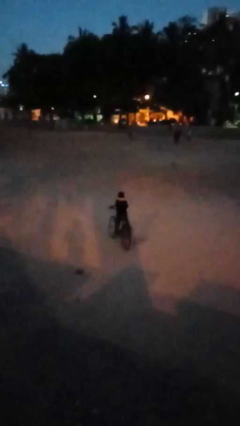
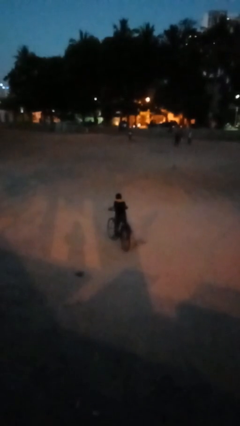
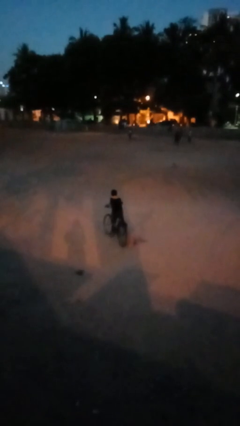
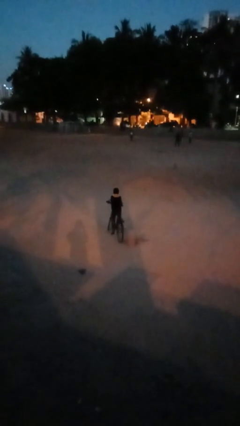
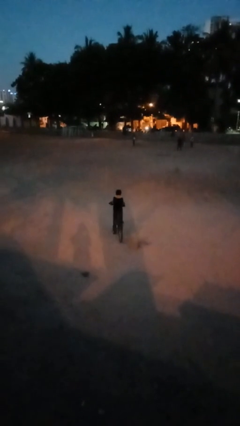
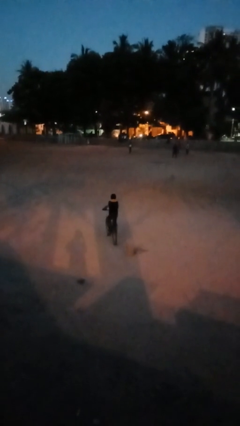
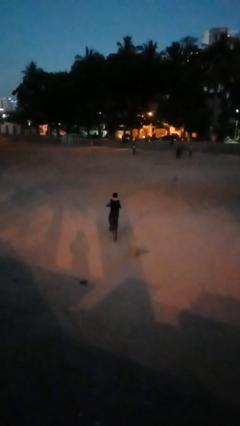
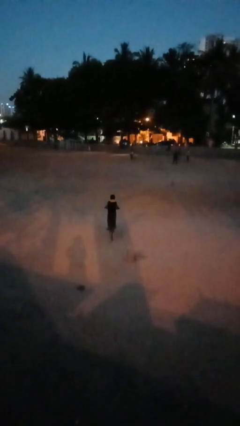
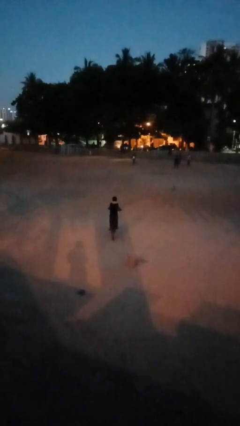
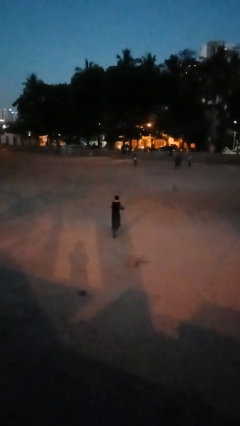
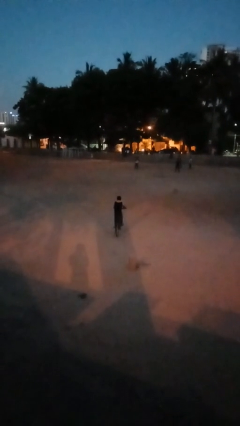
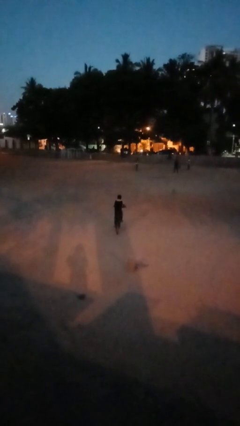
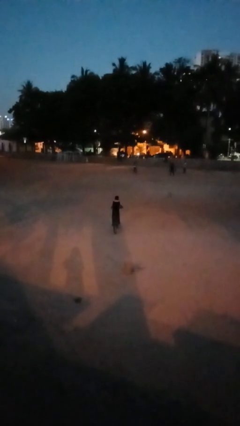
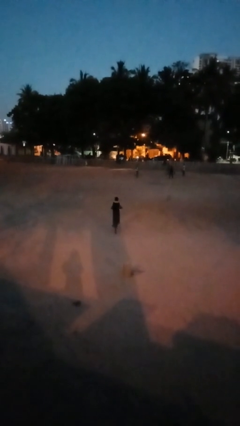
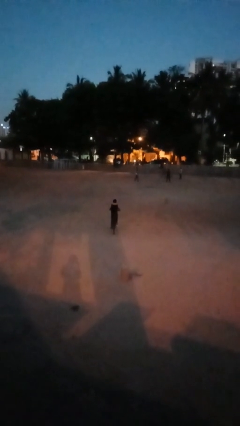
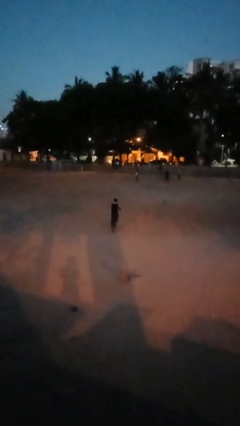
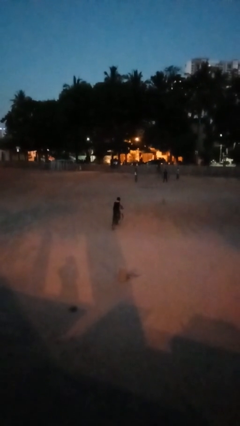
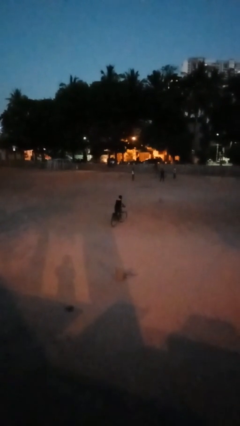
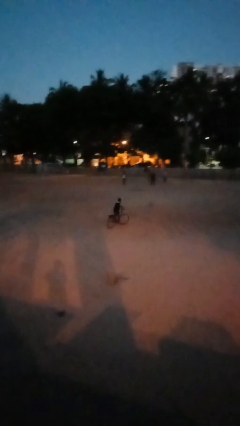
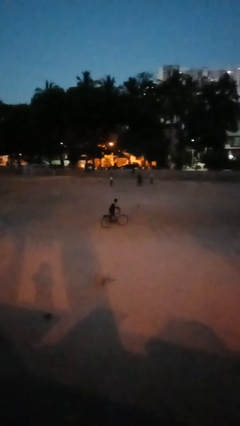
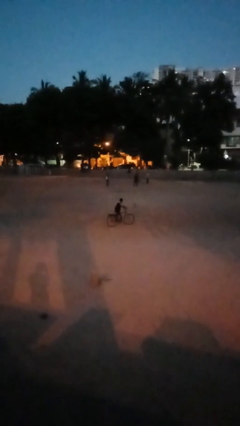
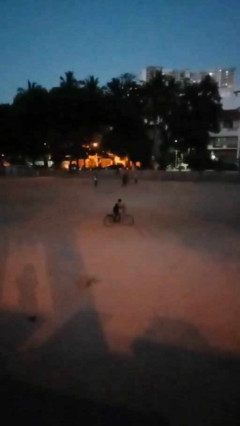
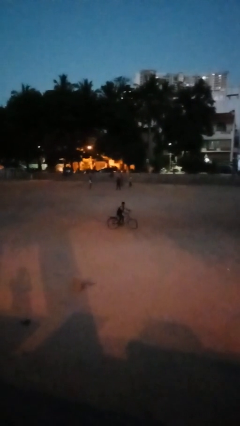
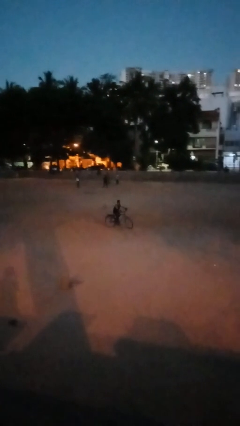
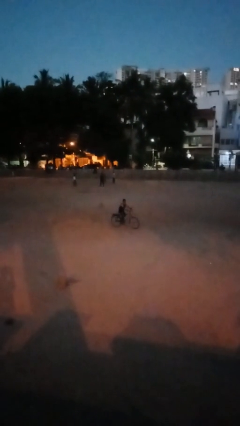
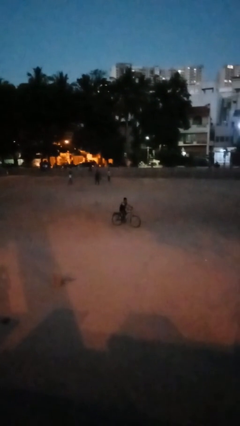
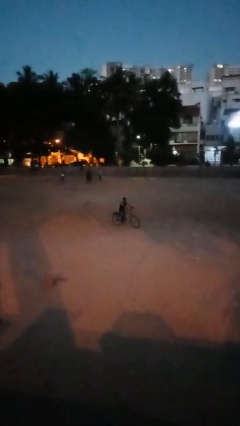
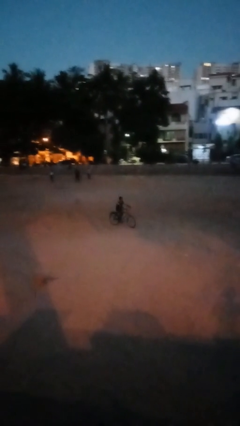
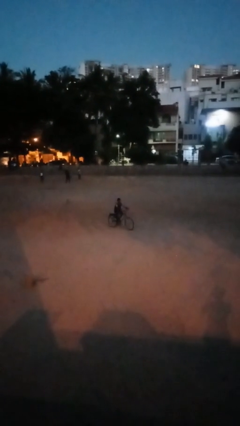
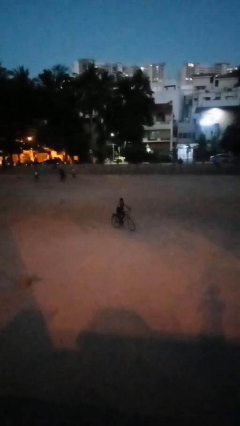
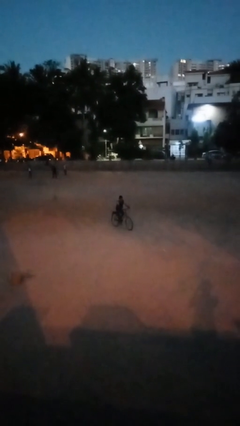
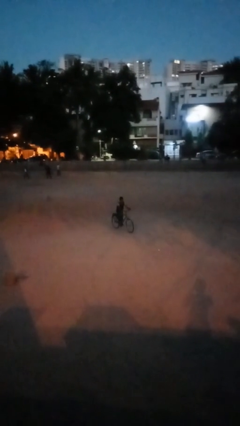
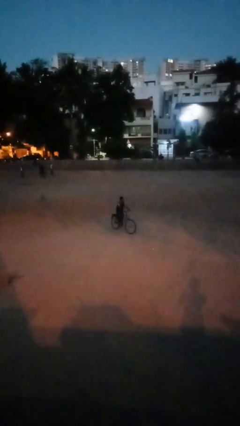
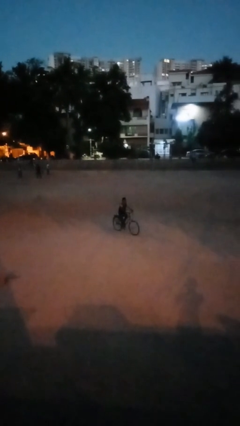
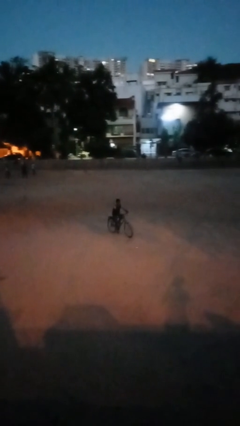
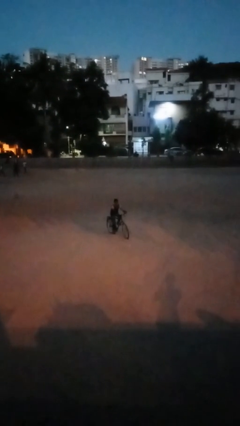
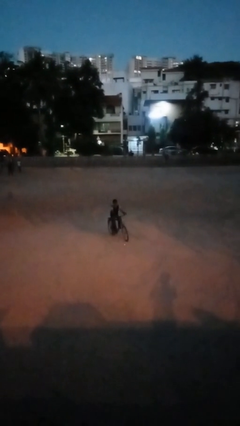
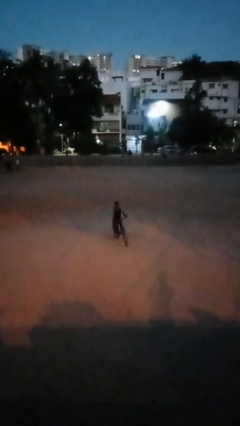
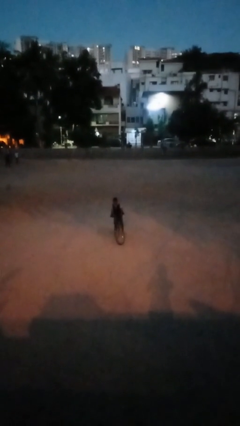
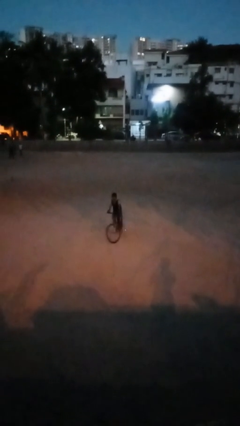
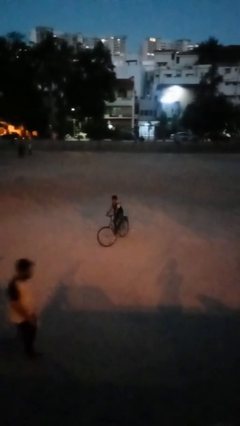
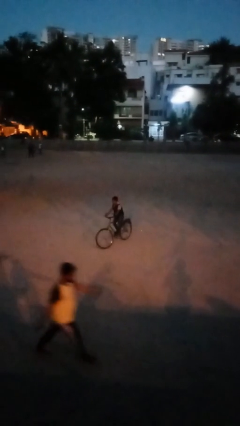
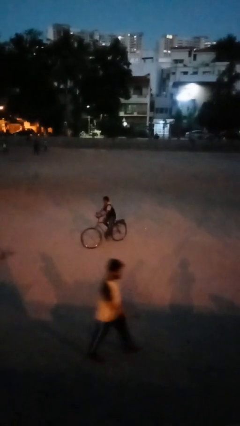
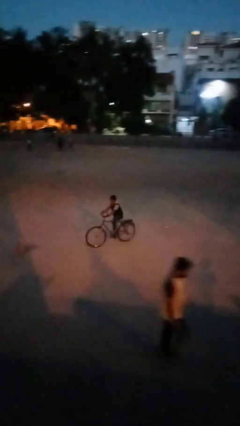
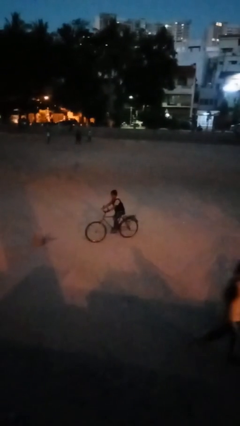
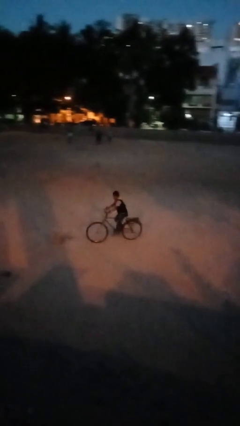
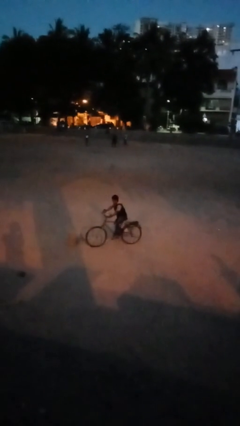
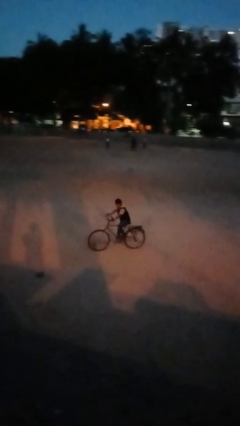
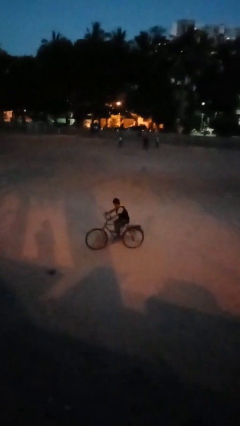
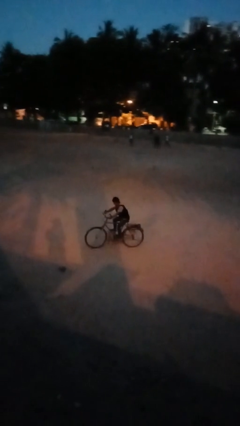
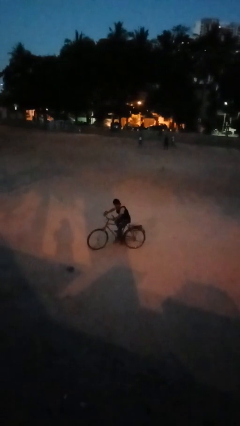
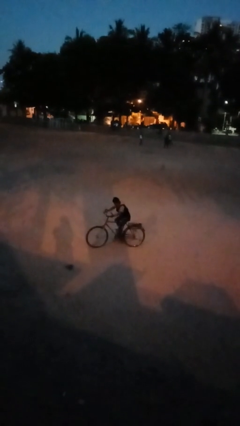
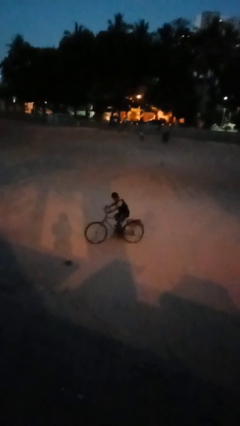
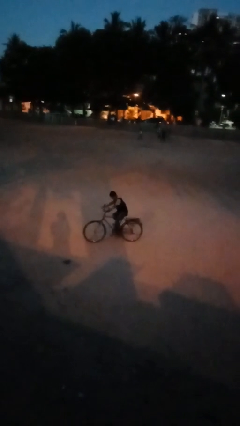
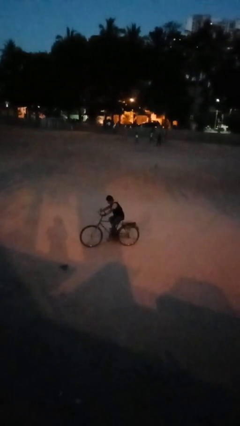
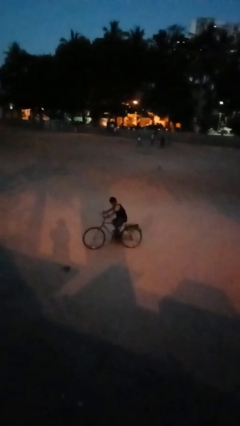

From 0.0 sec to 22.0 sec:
person rides bicycle

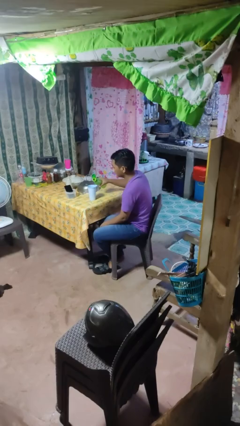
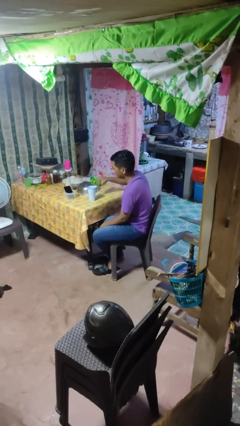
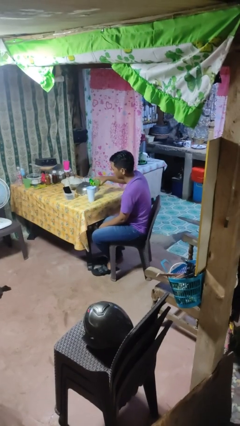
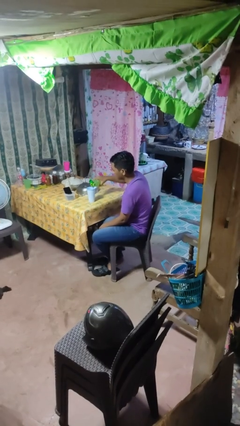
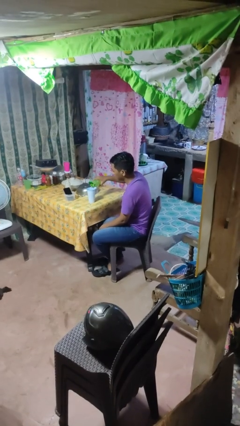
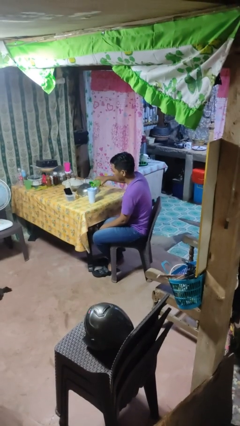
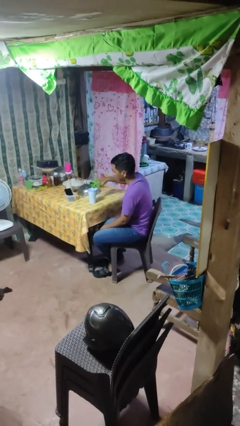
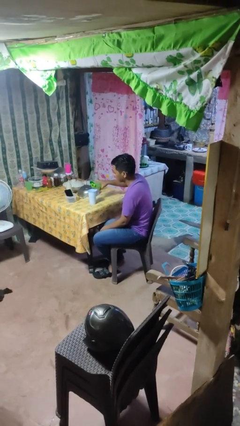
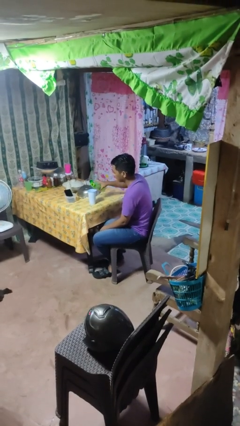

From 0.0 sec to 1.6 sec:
person pours liquid into cup

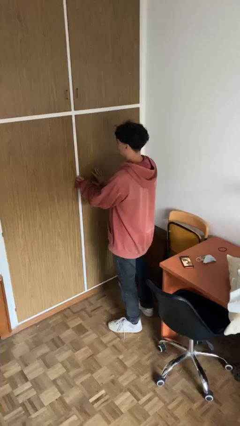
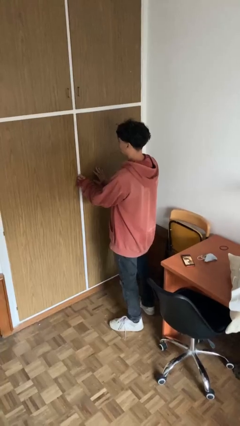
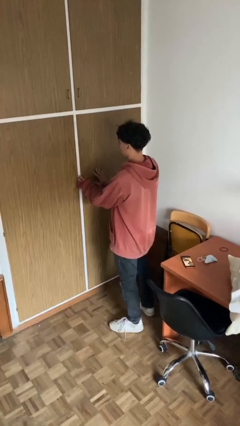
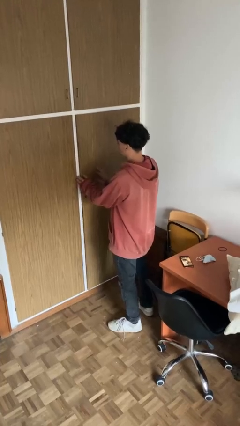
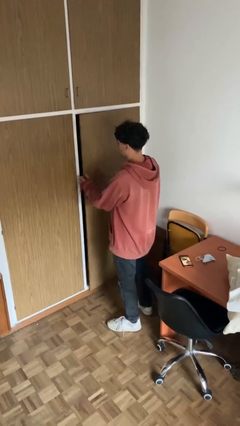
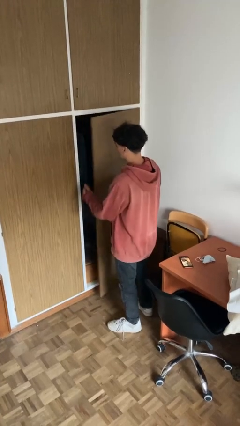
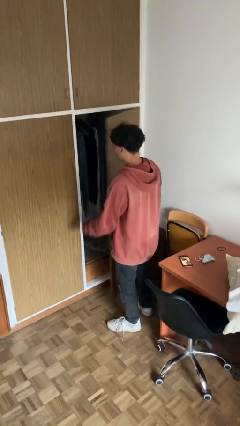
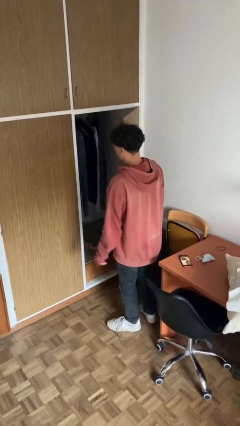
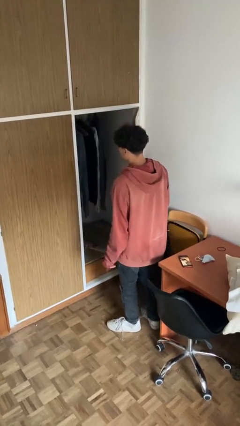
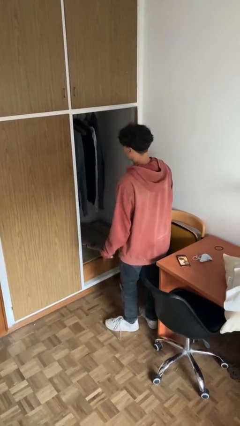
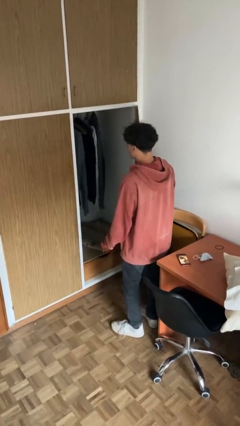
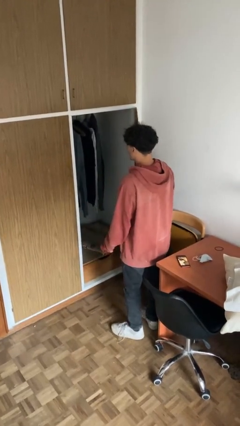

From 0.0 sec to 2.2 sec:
person opens closet door

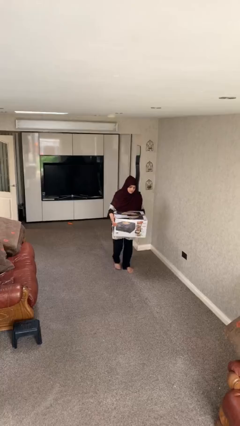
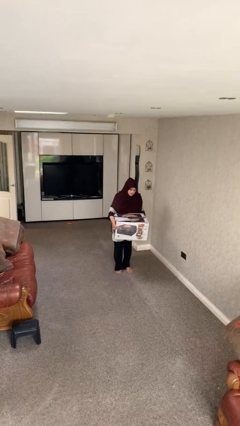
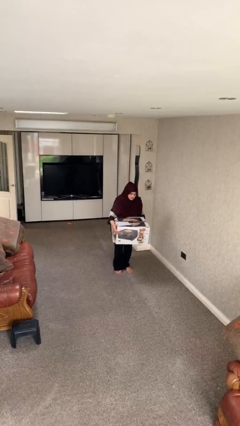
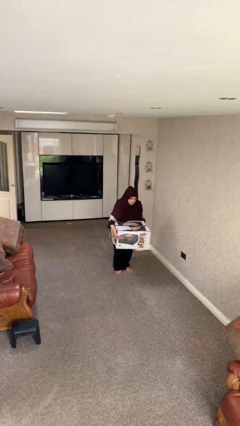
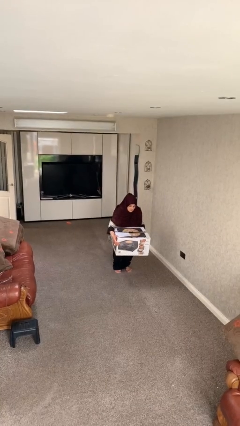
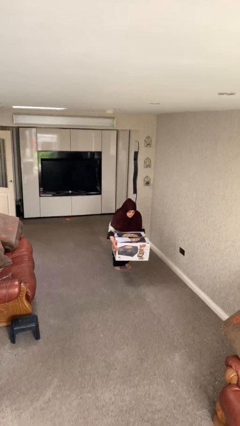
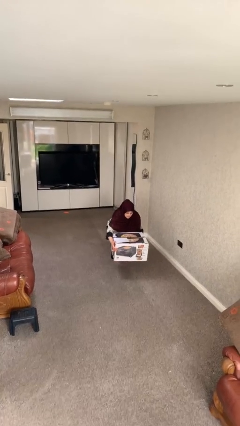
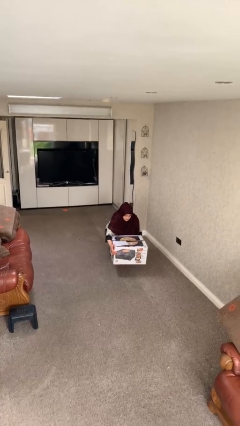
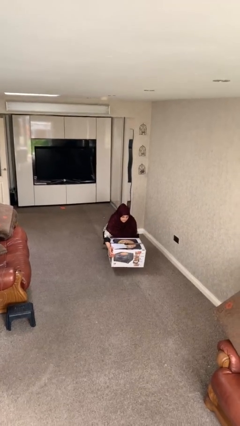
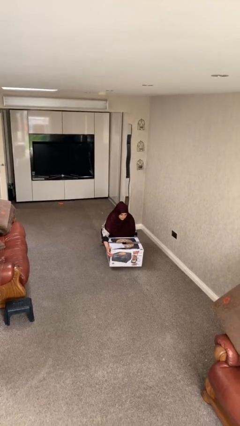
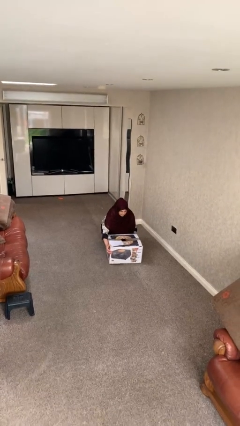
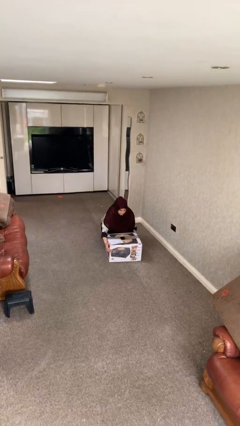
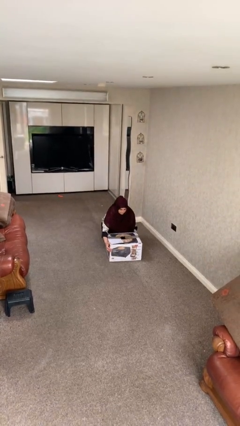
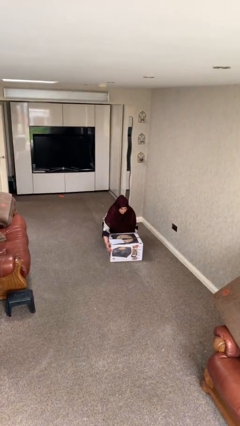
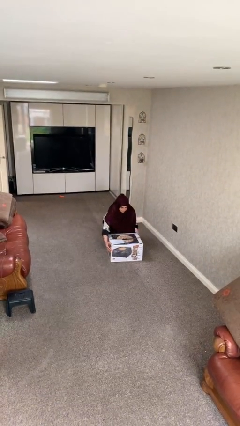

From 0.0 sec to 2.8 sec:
person puts down object on floor
